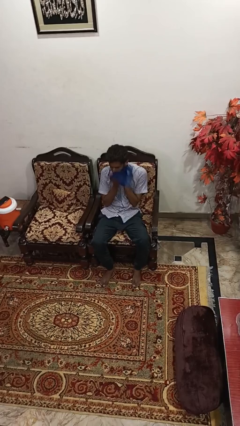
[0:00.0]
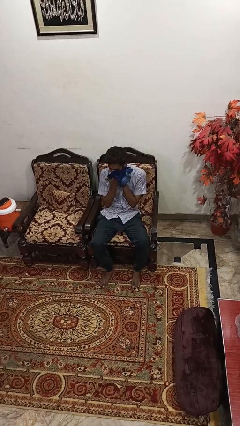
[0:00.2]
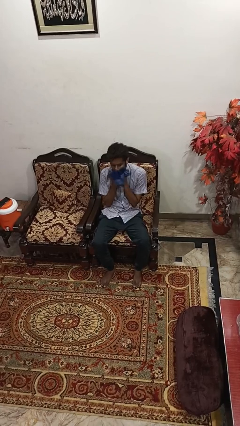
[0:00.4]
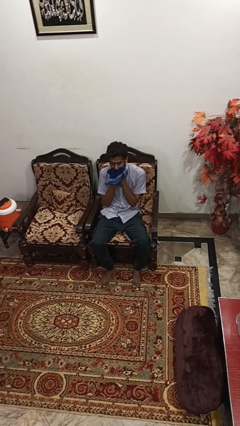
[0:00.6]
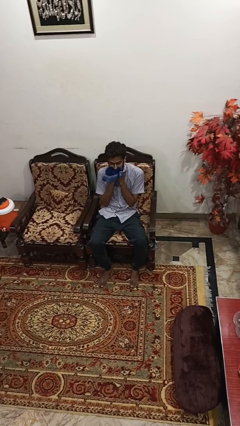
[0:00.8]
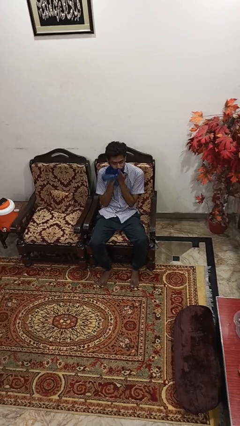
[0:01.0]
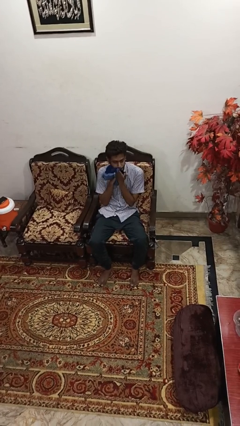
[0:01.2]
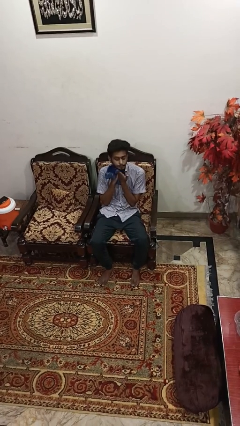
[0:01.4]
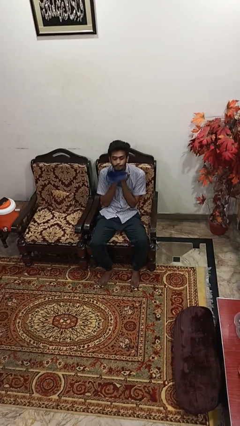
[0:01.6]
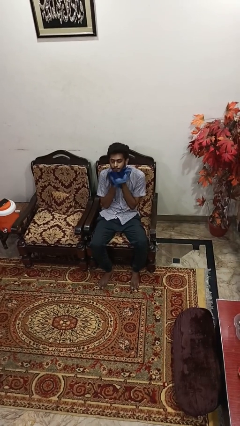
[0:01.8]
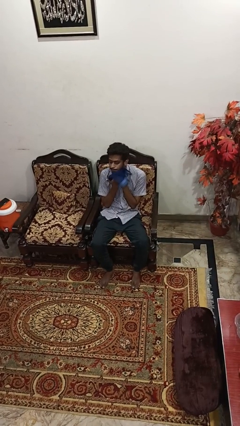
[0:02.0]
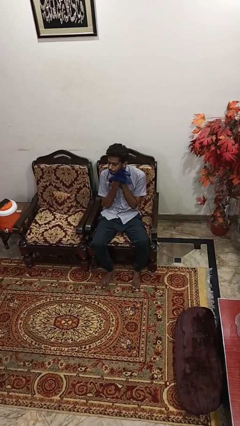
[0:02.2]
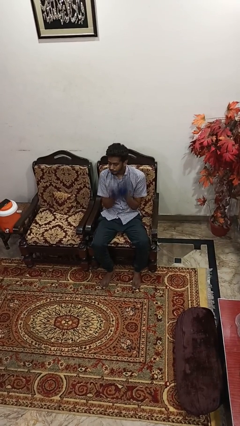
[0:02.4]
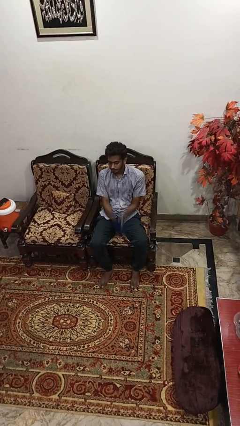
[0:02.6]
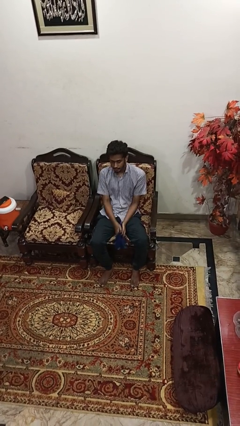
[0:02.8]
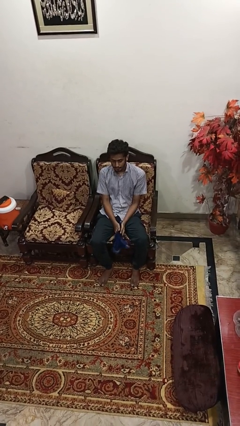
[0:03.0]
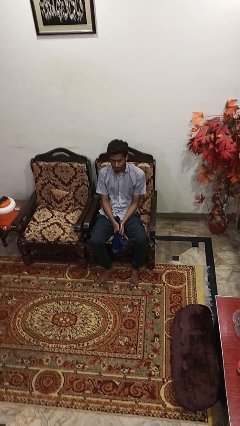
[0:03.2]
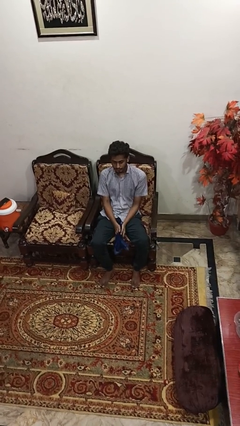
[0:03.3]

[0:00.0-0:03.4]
person wipes mouth with napkin

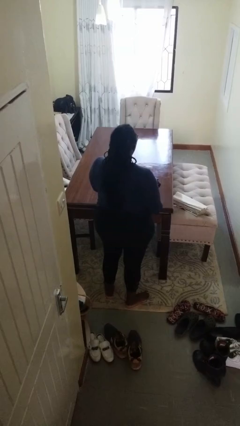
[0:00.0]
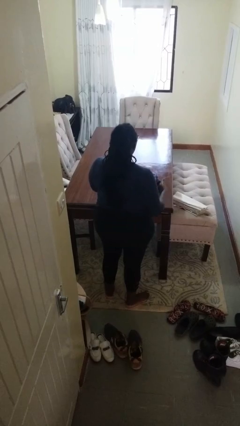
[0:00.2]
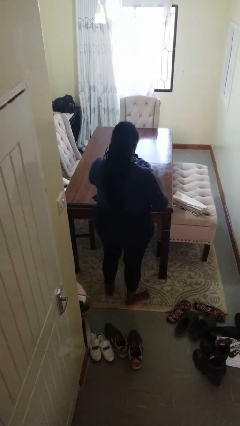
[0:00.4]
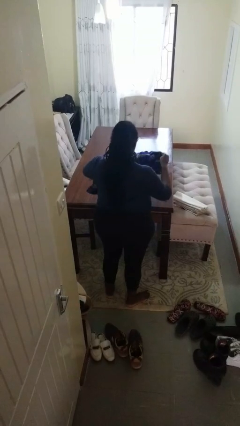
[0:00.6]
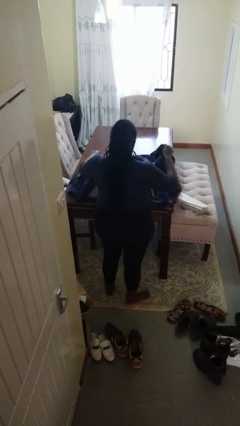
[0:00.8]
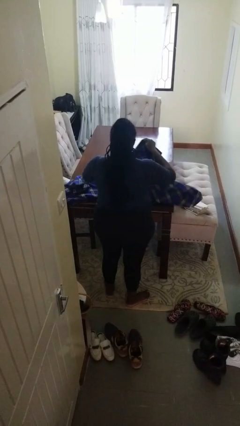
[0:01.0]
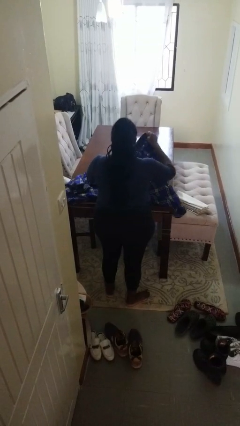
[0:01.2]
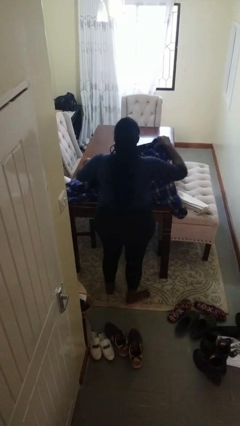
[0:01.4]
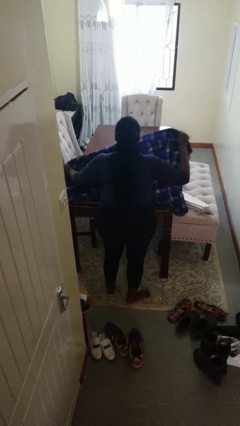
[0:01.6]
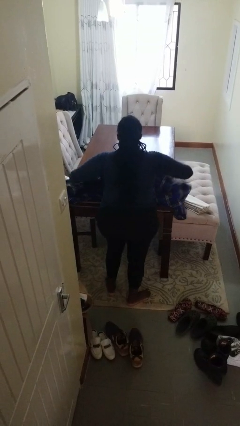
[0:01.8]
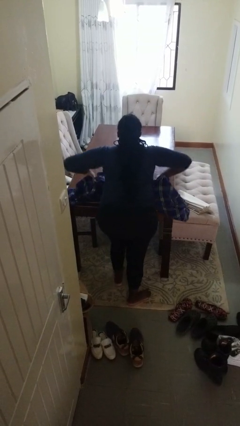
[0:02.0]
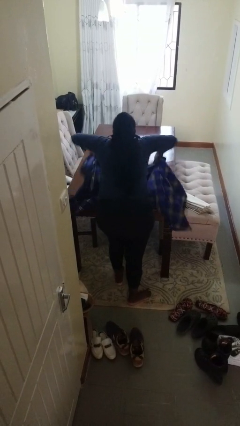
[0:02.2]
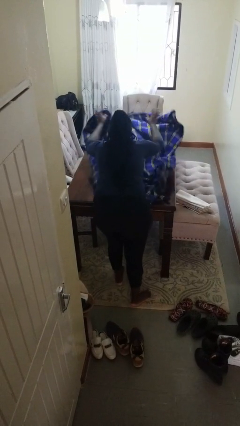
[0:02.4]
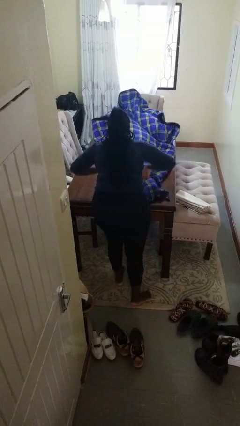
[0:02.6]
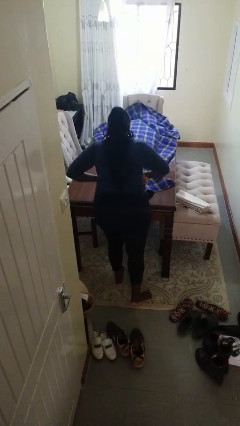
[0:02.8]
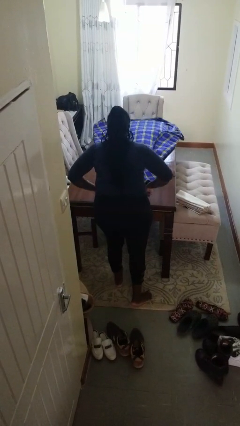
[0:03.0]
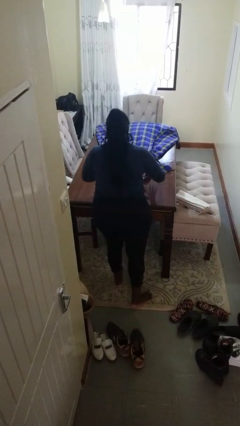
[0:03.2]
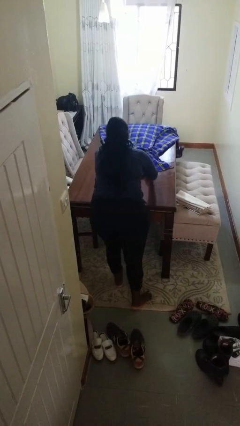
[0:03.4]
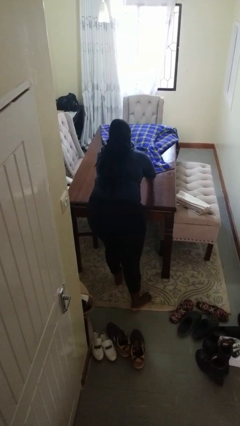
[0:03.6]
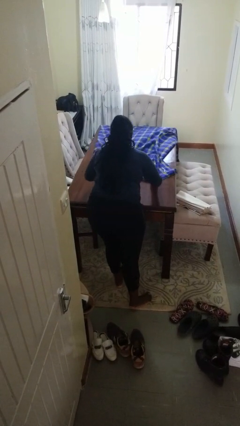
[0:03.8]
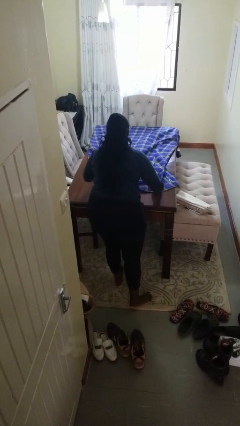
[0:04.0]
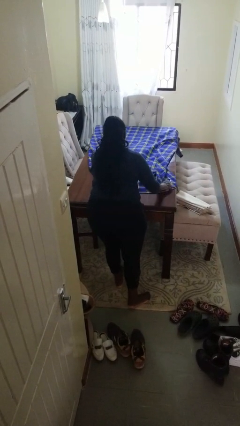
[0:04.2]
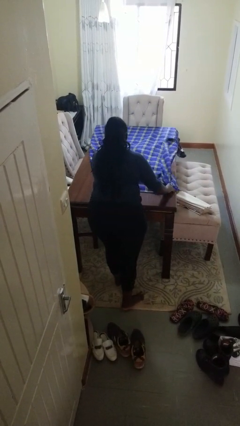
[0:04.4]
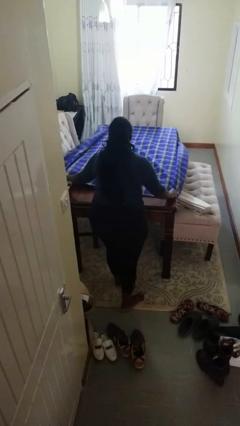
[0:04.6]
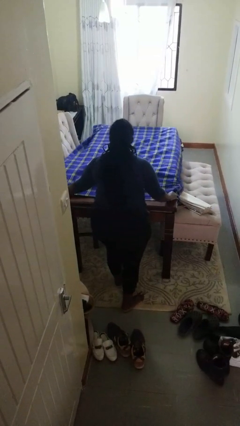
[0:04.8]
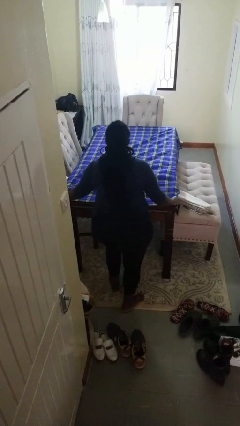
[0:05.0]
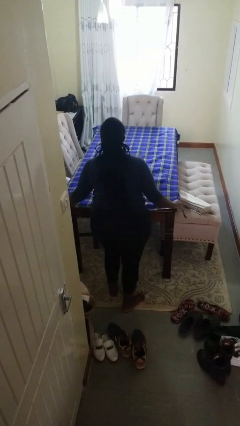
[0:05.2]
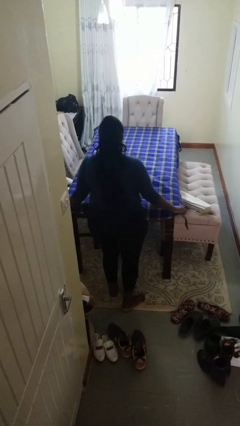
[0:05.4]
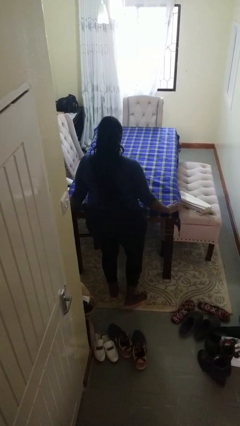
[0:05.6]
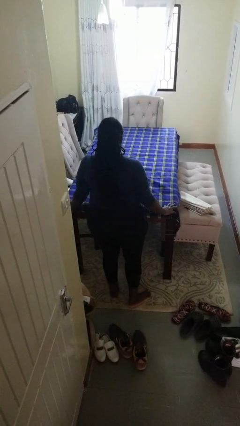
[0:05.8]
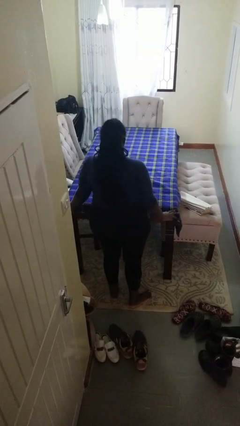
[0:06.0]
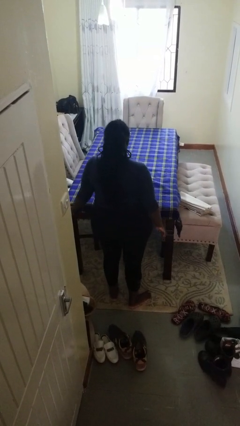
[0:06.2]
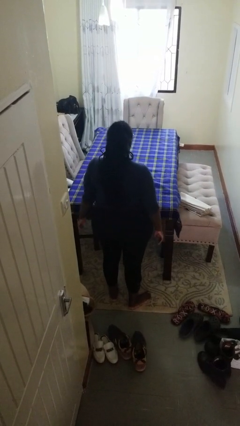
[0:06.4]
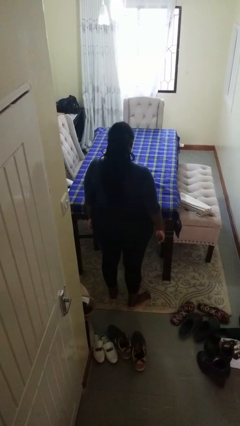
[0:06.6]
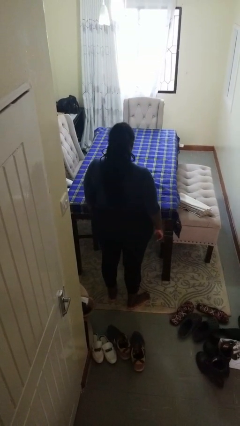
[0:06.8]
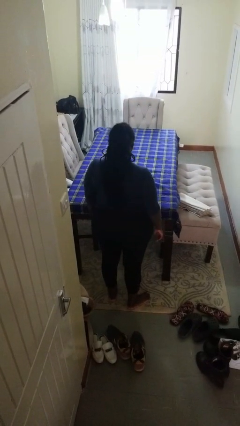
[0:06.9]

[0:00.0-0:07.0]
person spreads tablecloth

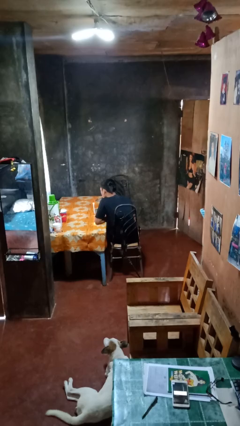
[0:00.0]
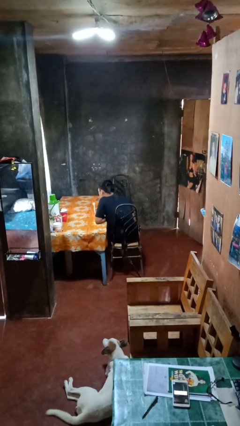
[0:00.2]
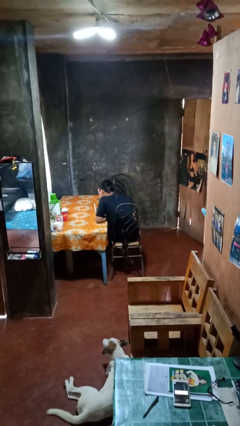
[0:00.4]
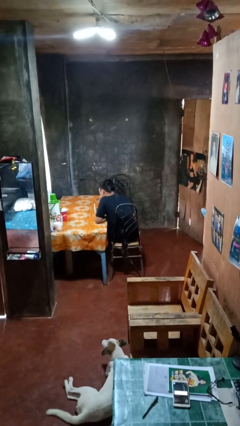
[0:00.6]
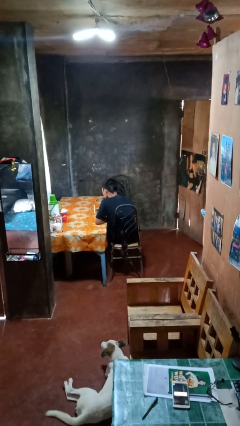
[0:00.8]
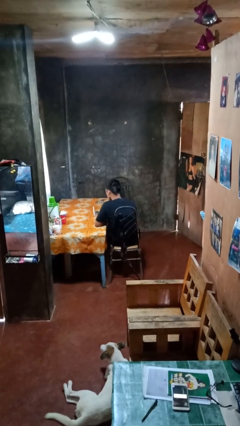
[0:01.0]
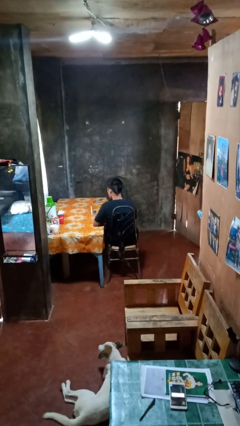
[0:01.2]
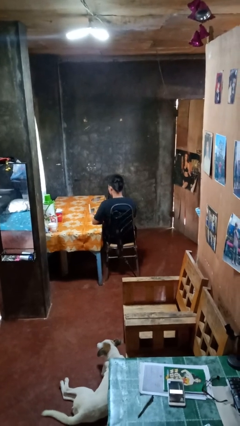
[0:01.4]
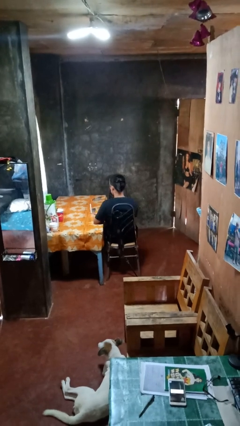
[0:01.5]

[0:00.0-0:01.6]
person extinguishes candle

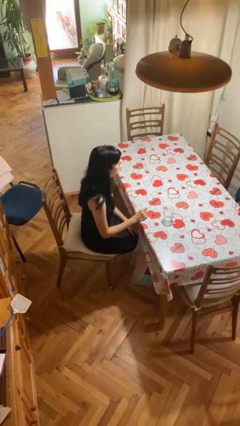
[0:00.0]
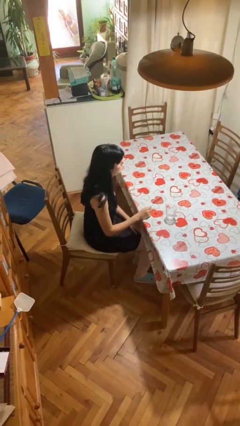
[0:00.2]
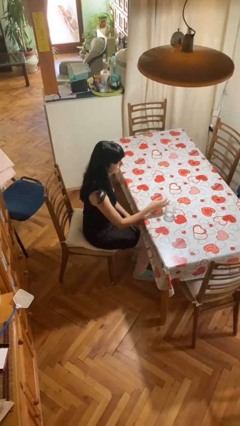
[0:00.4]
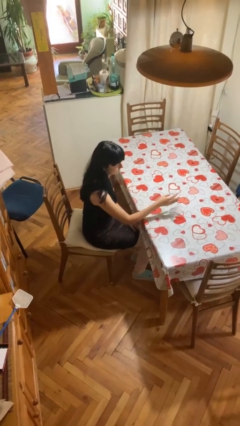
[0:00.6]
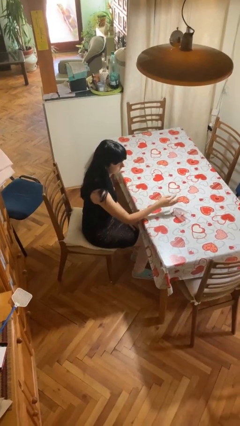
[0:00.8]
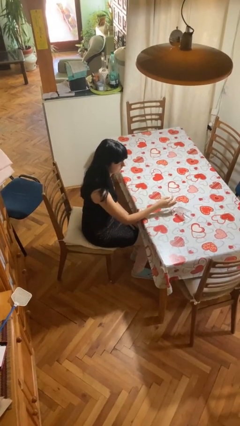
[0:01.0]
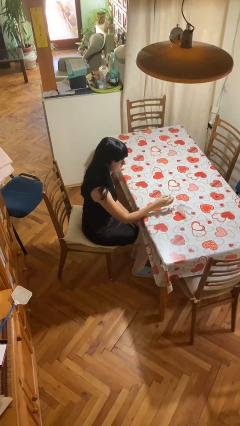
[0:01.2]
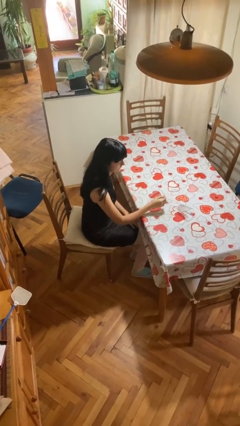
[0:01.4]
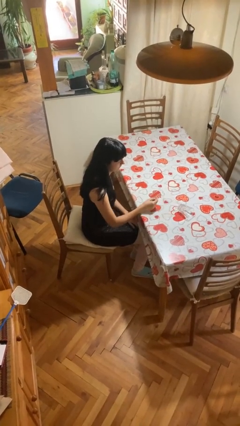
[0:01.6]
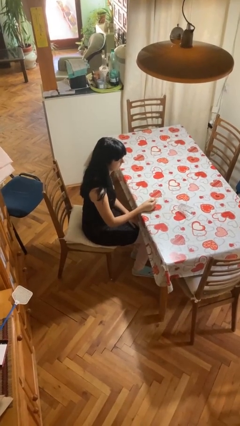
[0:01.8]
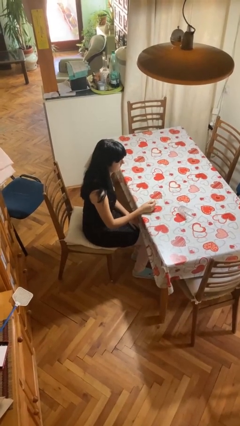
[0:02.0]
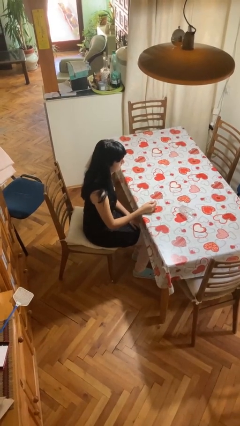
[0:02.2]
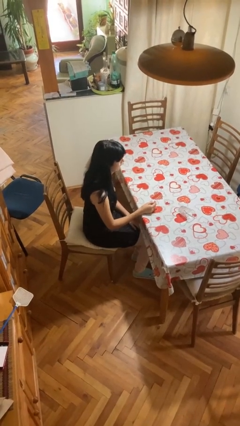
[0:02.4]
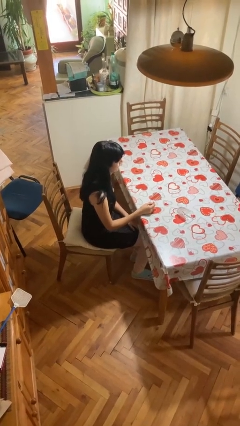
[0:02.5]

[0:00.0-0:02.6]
person knocks over glass

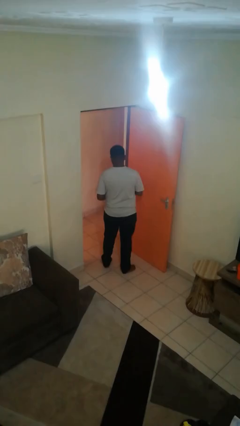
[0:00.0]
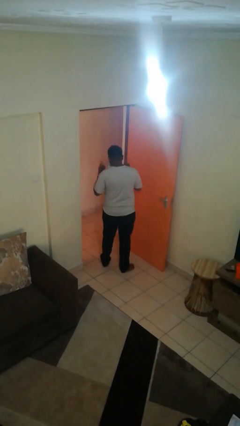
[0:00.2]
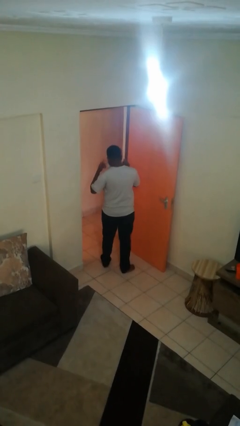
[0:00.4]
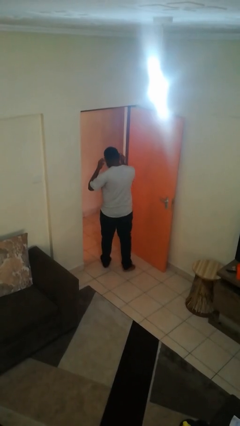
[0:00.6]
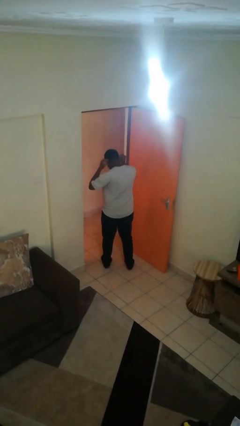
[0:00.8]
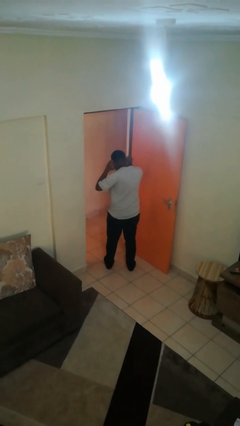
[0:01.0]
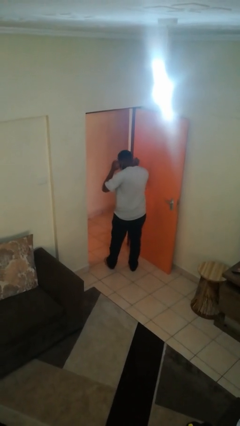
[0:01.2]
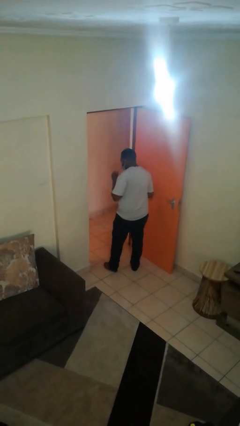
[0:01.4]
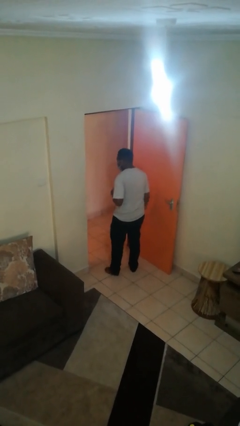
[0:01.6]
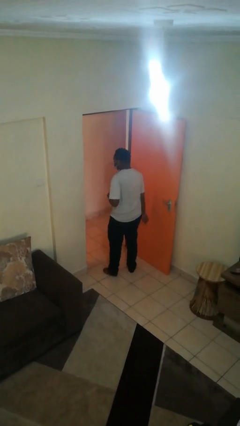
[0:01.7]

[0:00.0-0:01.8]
person puts on facemask

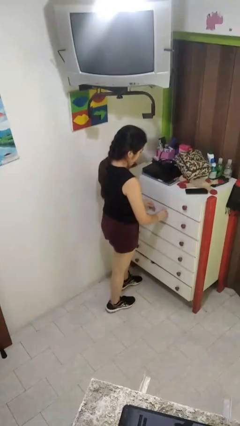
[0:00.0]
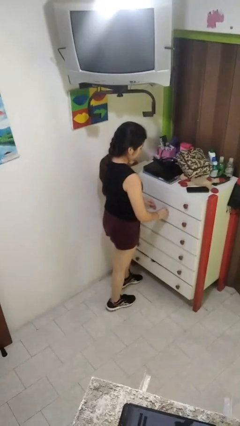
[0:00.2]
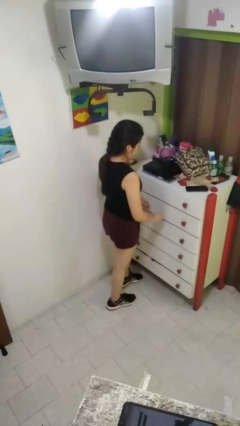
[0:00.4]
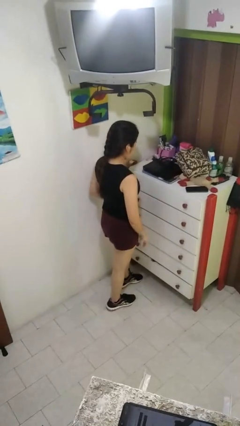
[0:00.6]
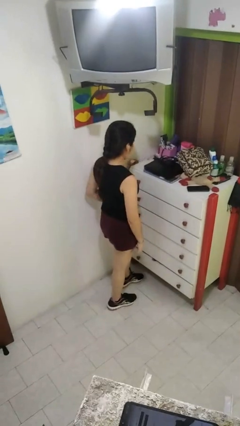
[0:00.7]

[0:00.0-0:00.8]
person closes dresser drawer

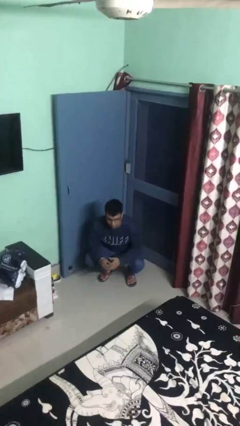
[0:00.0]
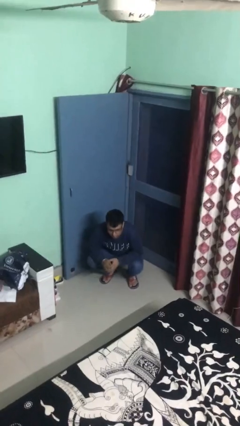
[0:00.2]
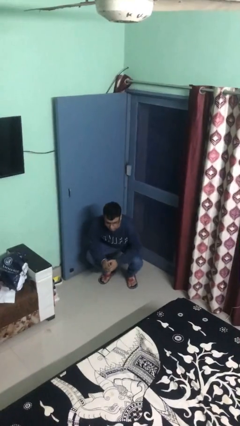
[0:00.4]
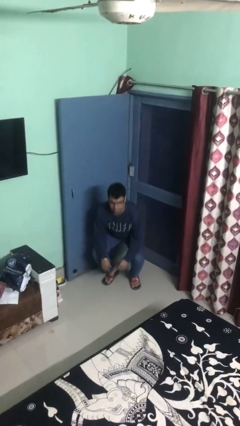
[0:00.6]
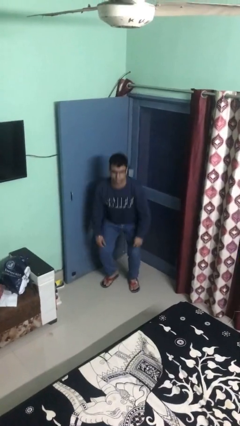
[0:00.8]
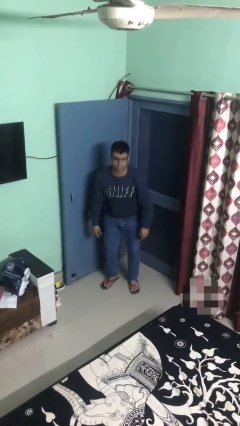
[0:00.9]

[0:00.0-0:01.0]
person stands up
